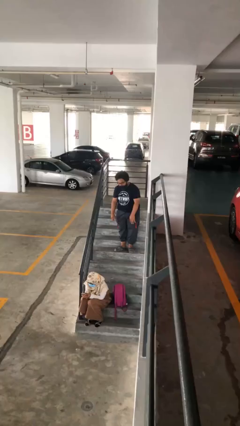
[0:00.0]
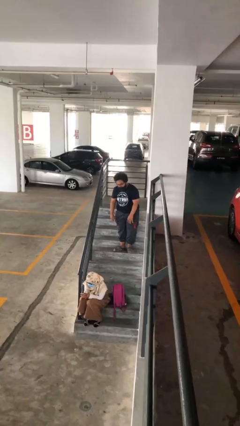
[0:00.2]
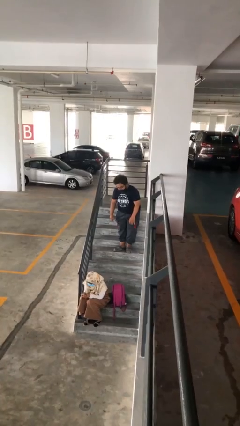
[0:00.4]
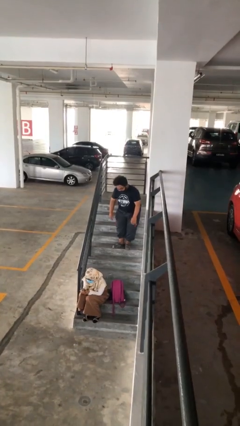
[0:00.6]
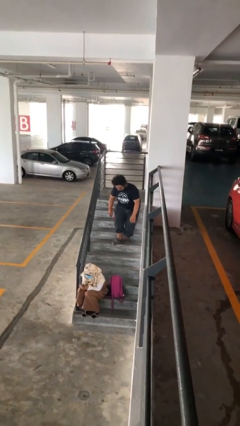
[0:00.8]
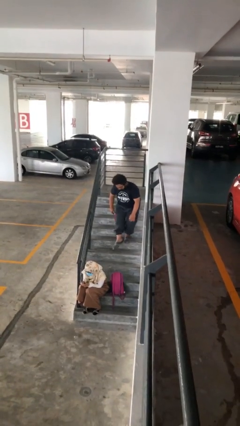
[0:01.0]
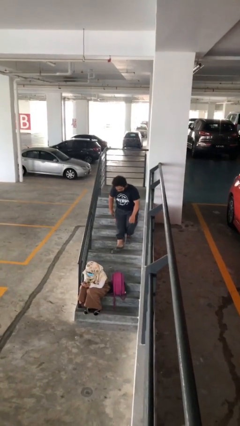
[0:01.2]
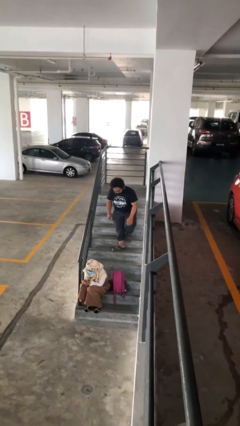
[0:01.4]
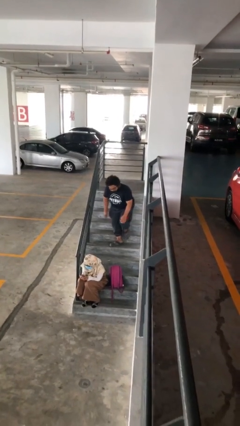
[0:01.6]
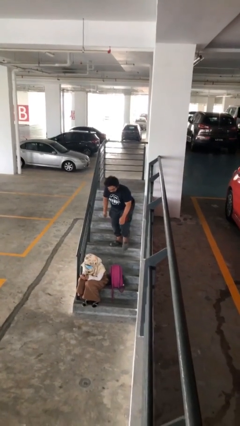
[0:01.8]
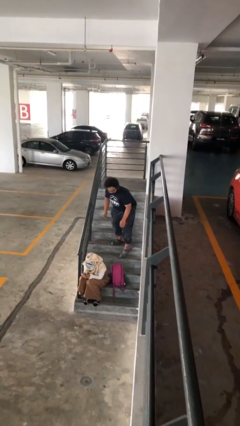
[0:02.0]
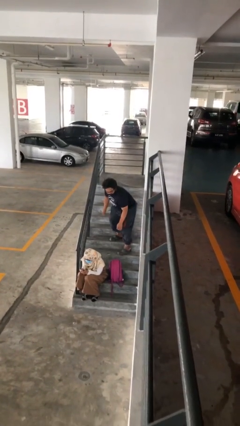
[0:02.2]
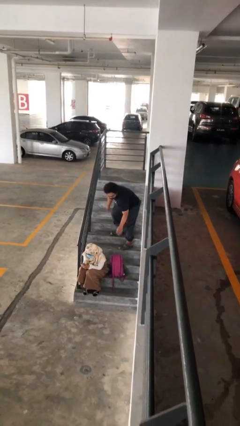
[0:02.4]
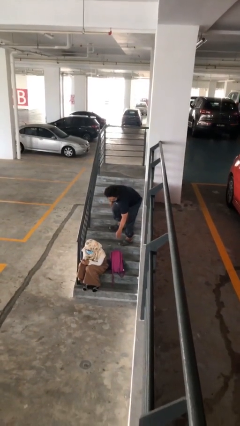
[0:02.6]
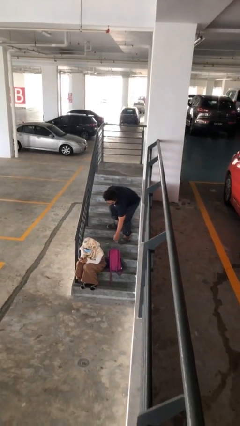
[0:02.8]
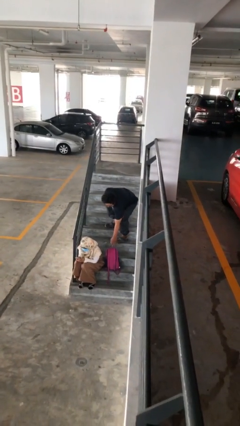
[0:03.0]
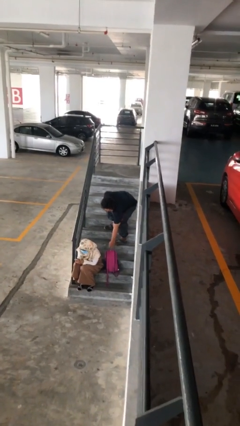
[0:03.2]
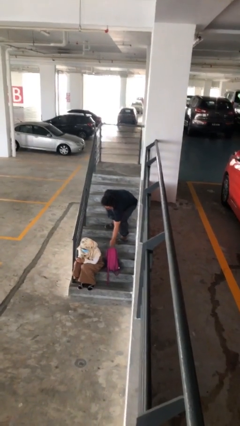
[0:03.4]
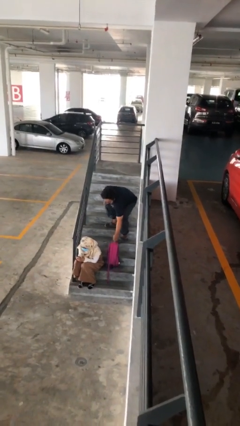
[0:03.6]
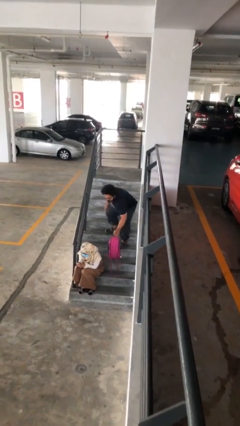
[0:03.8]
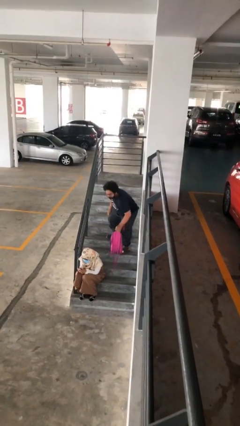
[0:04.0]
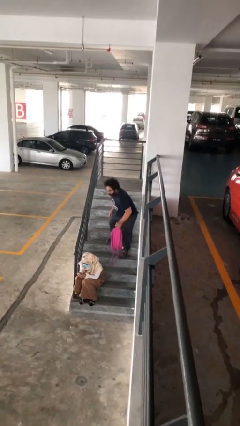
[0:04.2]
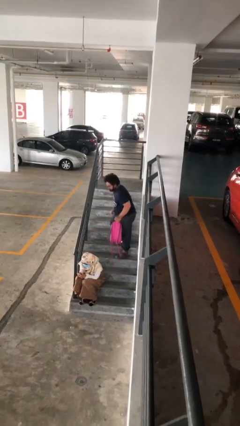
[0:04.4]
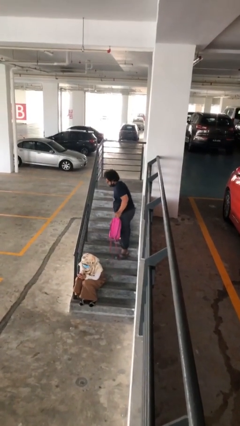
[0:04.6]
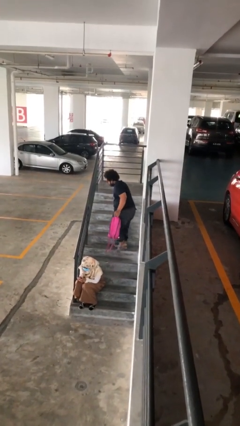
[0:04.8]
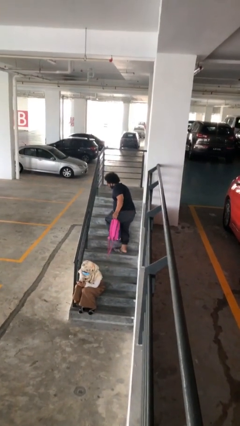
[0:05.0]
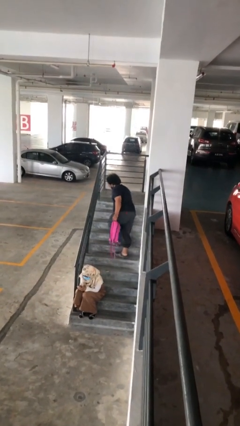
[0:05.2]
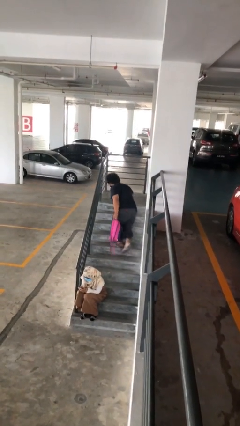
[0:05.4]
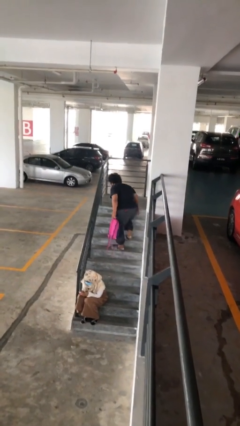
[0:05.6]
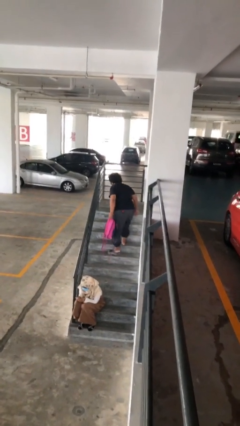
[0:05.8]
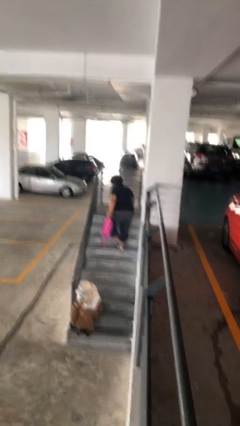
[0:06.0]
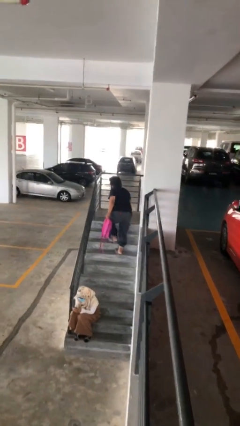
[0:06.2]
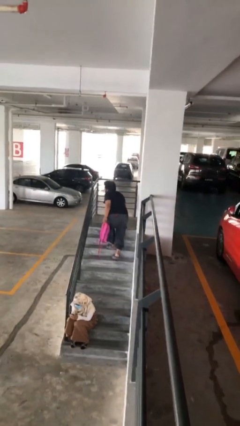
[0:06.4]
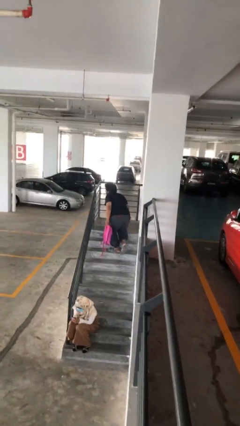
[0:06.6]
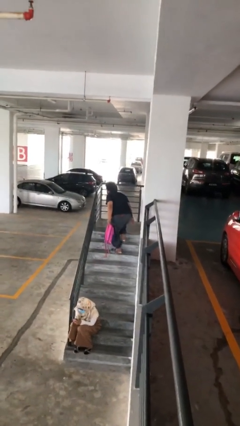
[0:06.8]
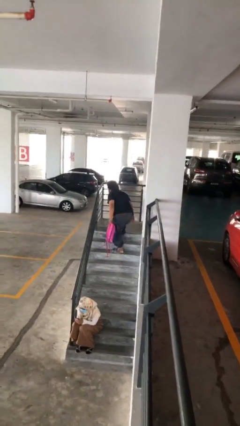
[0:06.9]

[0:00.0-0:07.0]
person steals object from person

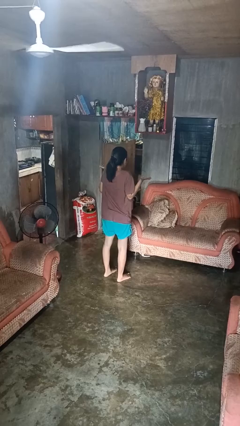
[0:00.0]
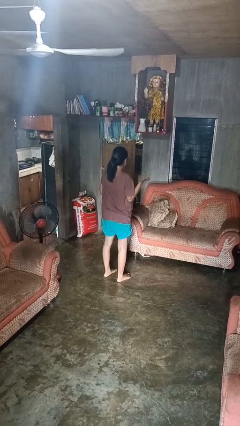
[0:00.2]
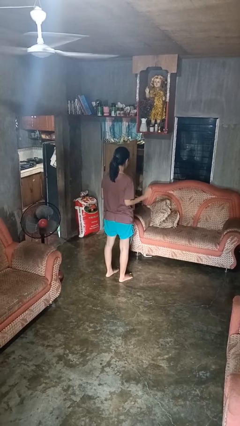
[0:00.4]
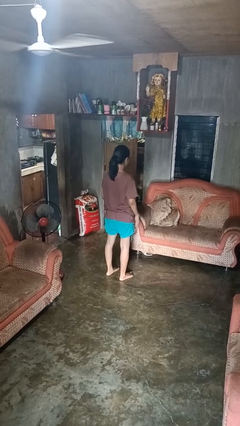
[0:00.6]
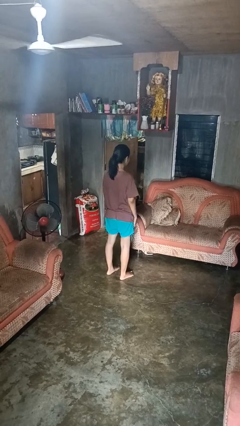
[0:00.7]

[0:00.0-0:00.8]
person shrugs

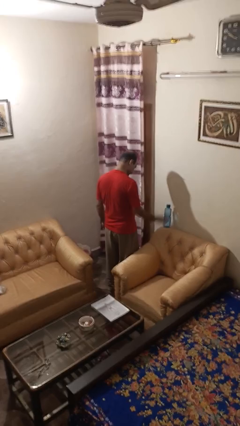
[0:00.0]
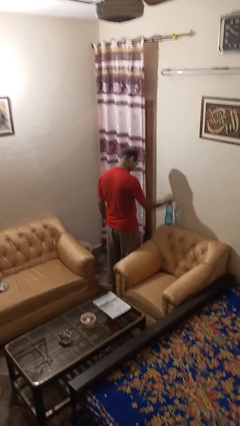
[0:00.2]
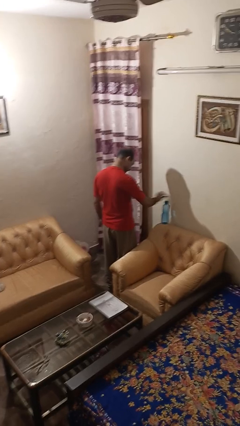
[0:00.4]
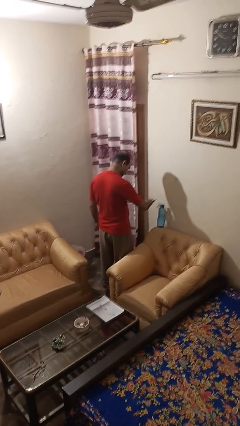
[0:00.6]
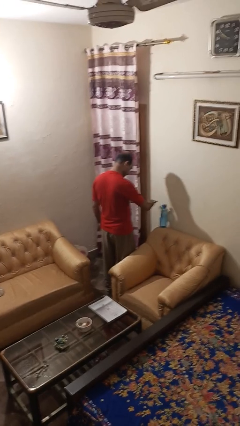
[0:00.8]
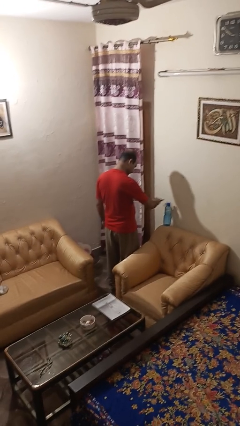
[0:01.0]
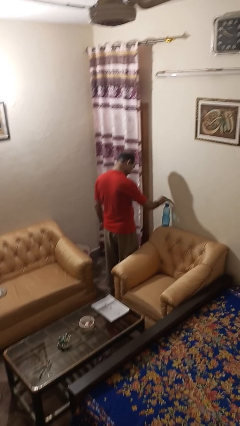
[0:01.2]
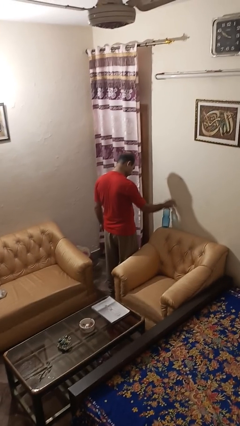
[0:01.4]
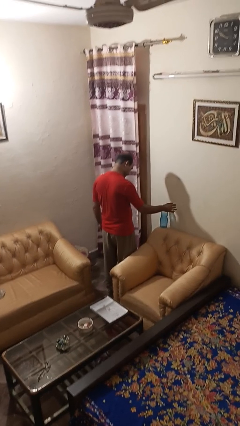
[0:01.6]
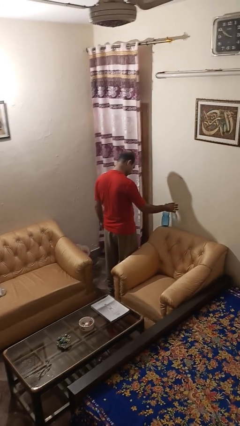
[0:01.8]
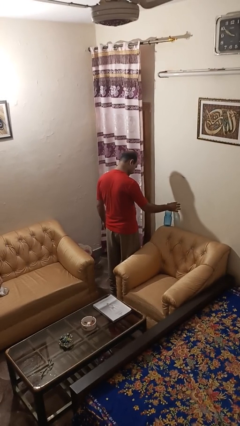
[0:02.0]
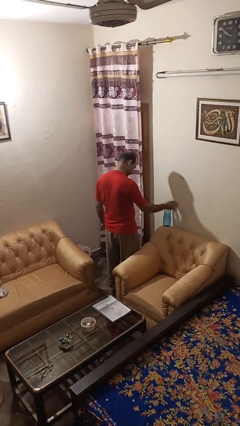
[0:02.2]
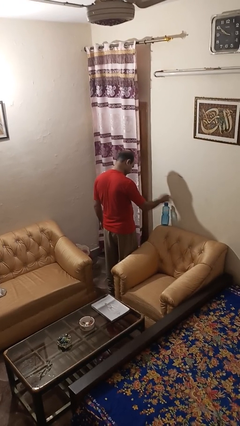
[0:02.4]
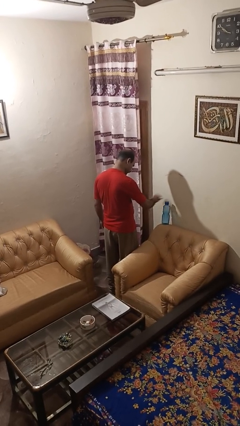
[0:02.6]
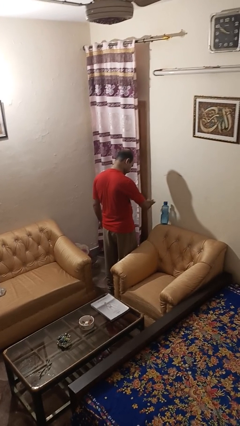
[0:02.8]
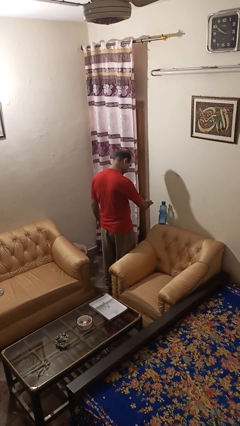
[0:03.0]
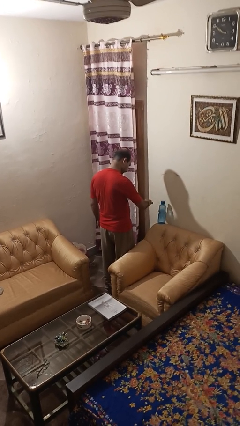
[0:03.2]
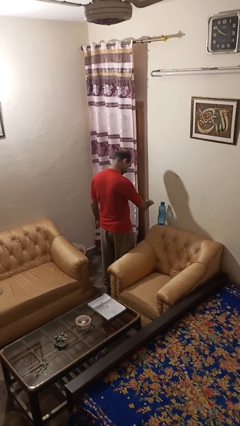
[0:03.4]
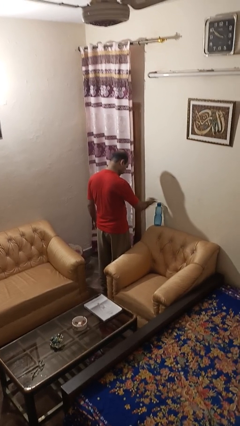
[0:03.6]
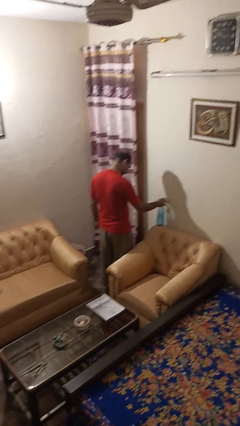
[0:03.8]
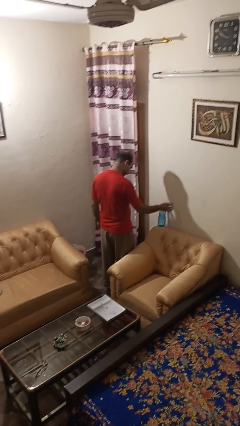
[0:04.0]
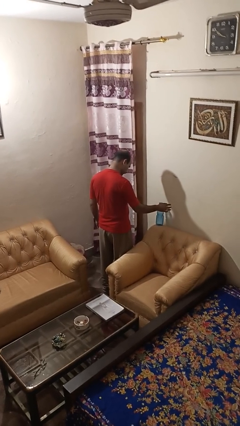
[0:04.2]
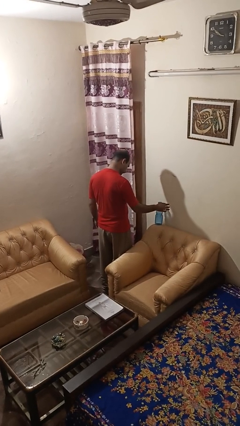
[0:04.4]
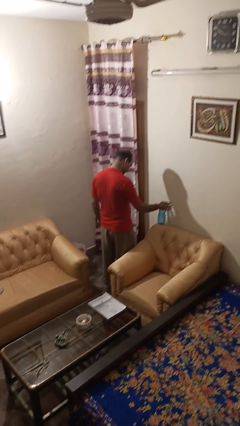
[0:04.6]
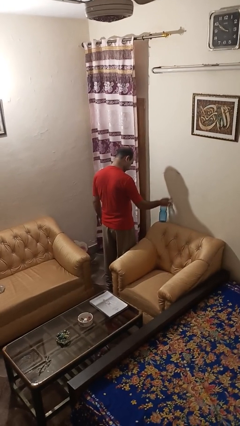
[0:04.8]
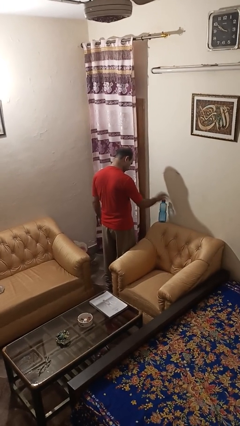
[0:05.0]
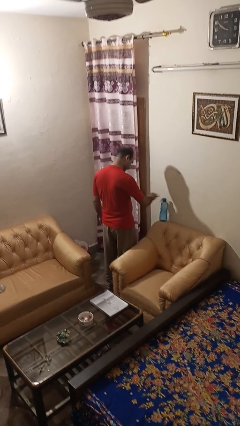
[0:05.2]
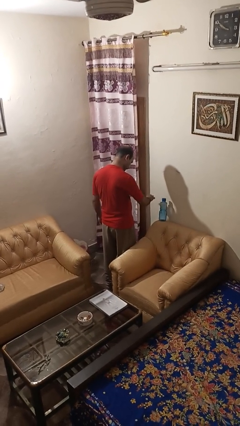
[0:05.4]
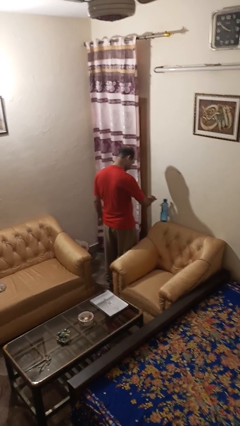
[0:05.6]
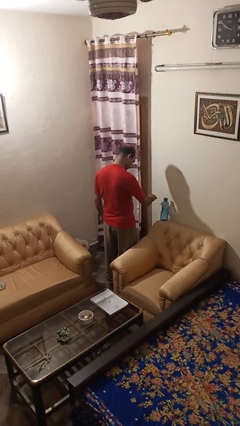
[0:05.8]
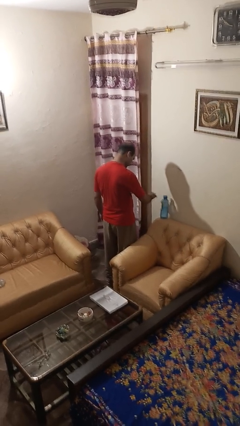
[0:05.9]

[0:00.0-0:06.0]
person waves hand over object

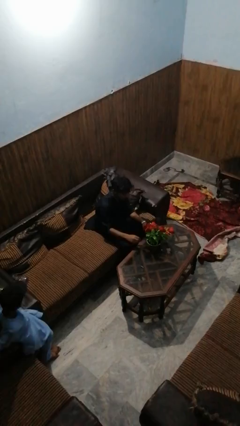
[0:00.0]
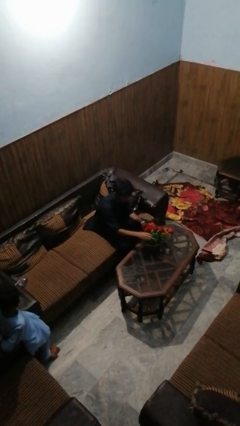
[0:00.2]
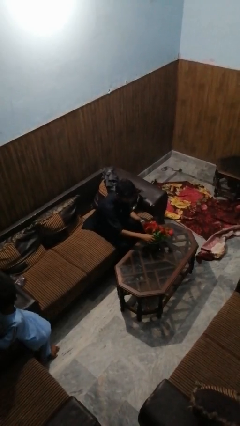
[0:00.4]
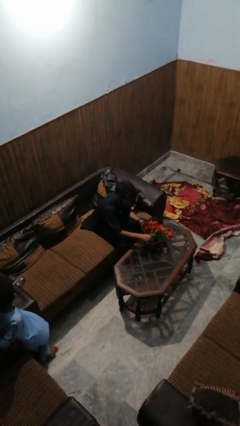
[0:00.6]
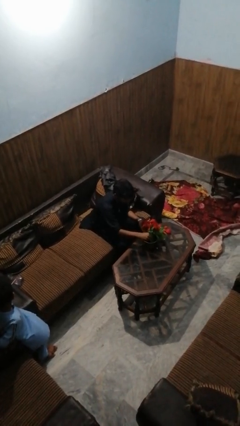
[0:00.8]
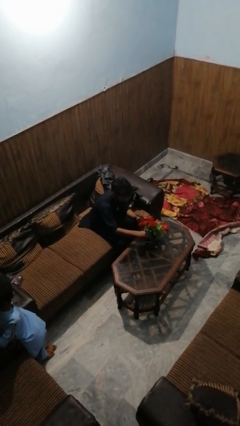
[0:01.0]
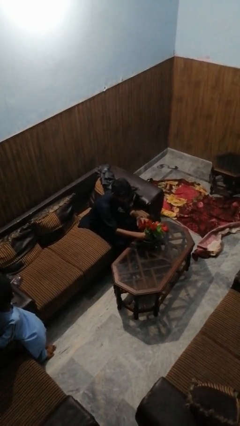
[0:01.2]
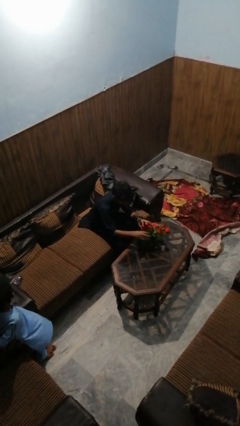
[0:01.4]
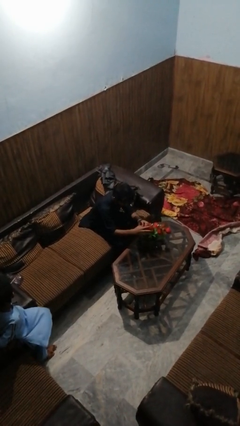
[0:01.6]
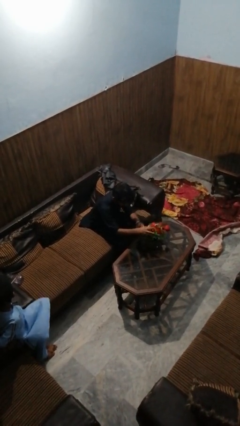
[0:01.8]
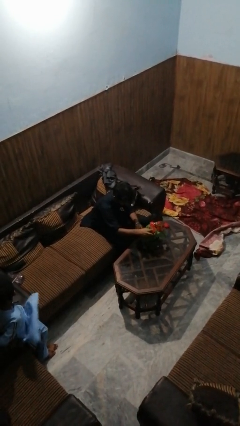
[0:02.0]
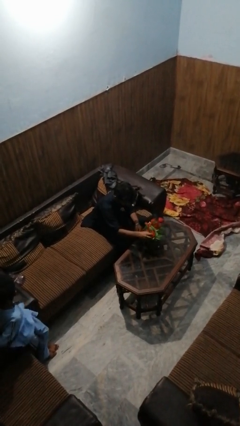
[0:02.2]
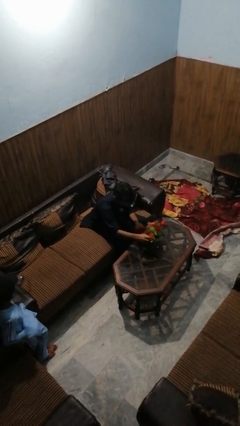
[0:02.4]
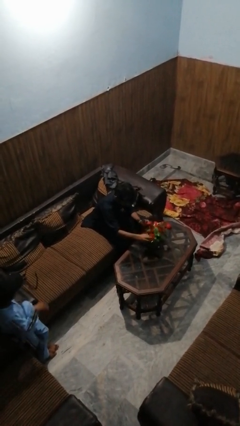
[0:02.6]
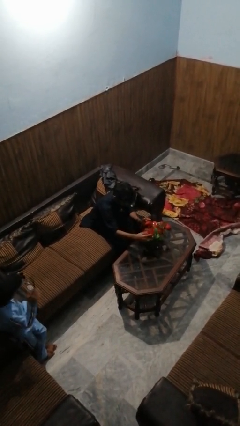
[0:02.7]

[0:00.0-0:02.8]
person arranges flowers in vase

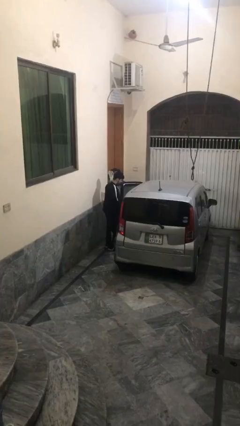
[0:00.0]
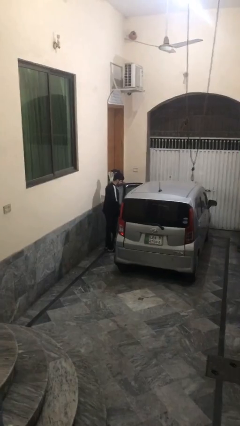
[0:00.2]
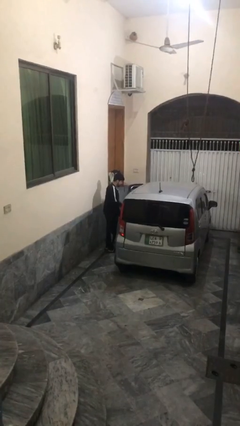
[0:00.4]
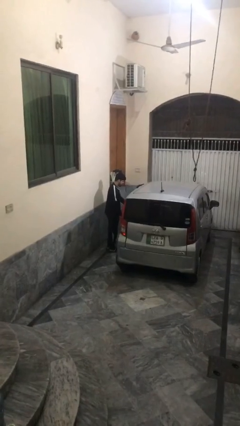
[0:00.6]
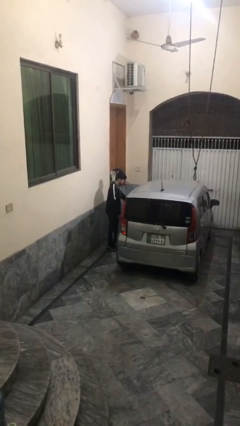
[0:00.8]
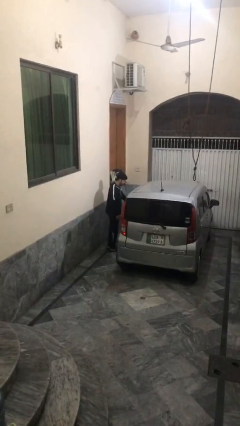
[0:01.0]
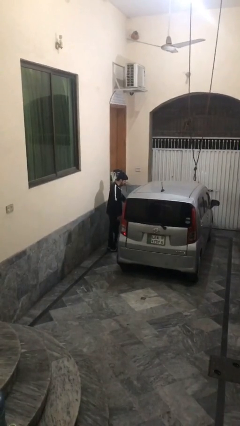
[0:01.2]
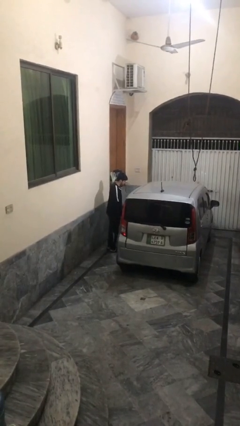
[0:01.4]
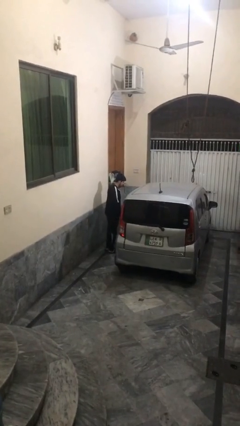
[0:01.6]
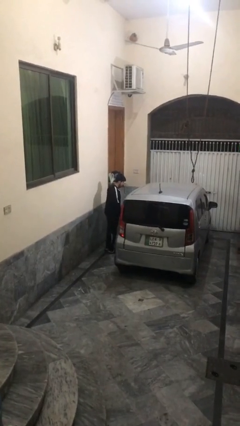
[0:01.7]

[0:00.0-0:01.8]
person closes car door
